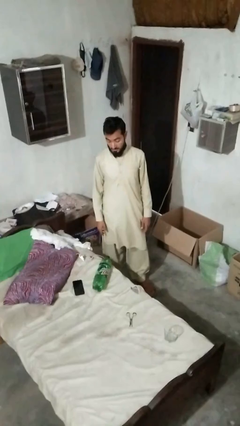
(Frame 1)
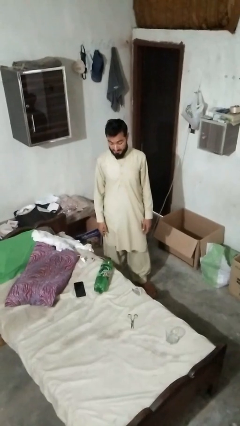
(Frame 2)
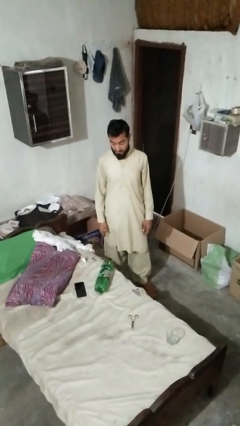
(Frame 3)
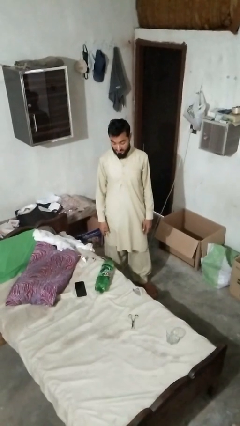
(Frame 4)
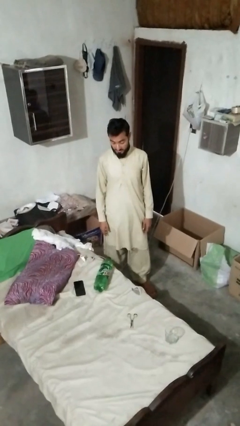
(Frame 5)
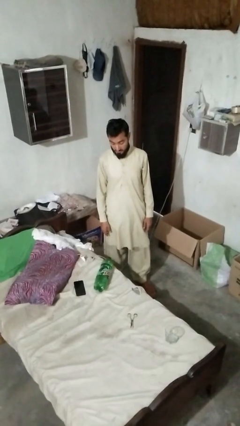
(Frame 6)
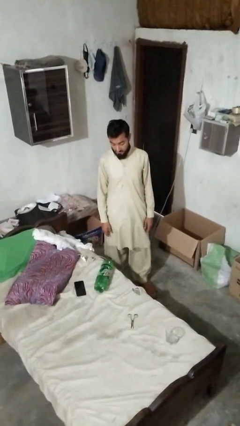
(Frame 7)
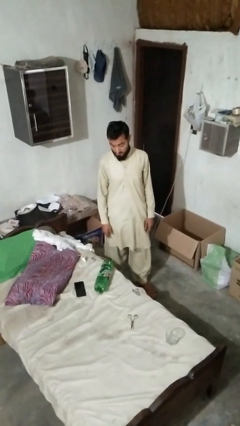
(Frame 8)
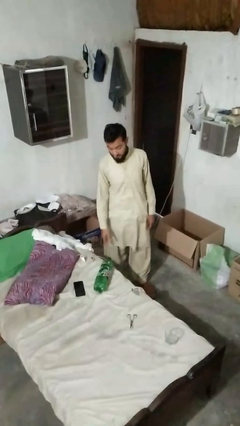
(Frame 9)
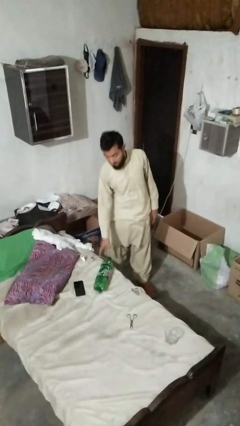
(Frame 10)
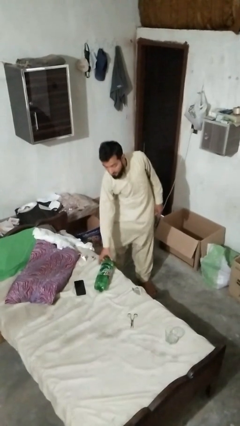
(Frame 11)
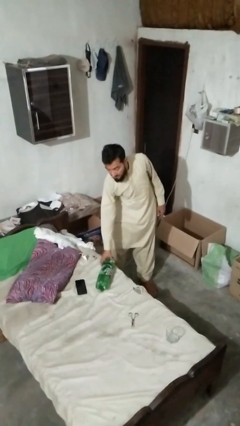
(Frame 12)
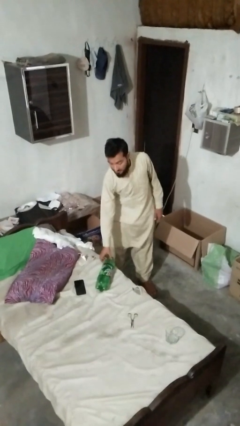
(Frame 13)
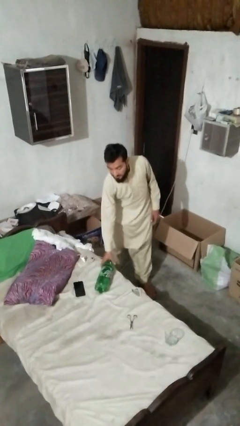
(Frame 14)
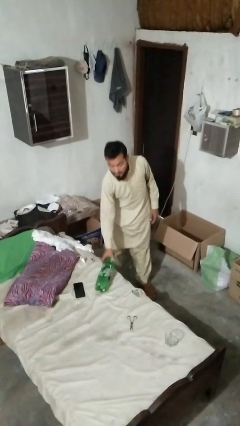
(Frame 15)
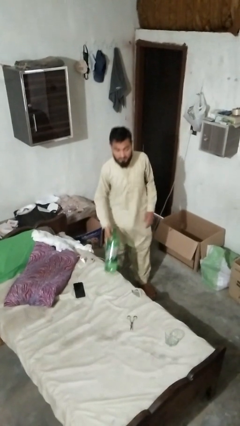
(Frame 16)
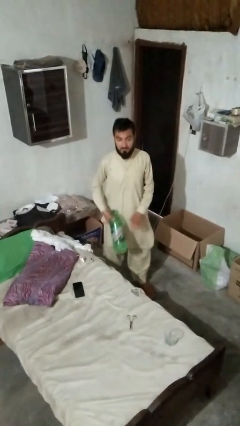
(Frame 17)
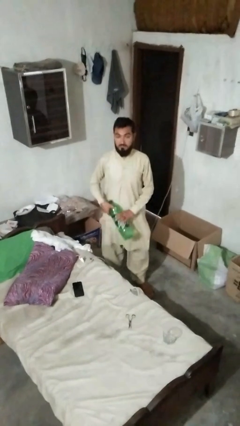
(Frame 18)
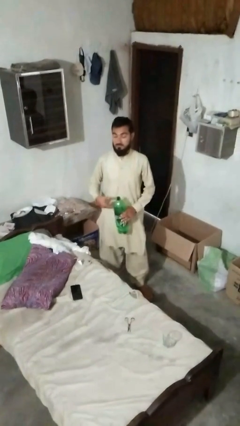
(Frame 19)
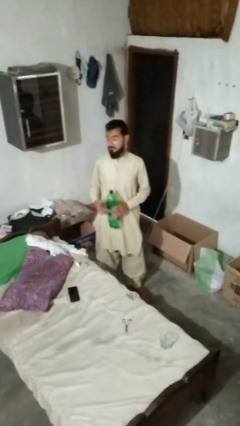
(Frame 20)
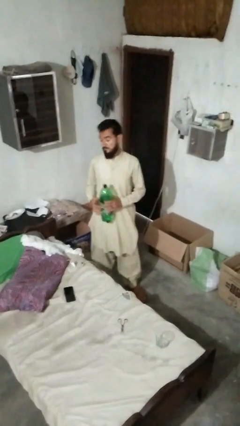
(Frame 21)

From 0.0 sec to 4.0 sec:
person picks up object from bed

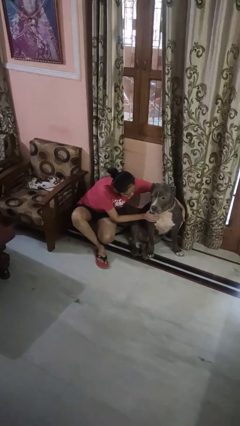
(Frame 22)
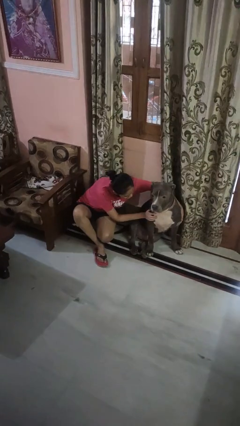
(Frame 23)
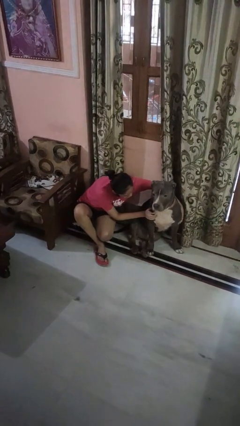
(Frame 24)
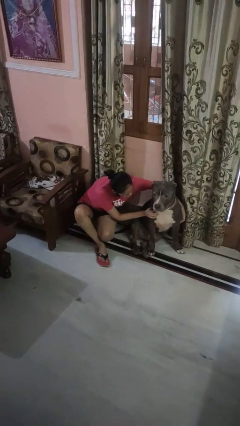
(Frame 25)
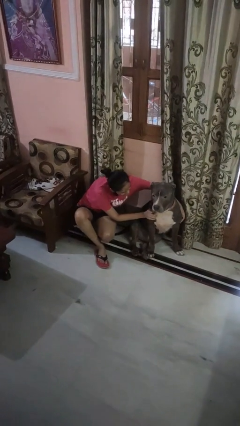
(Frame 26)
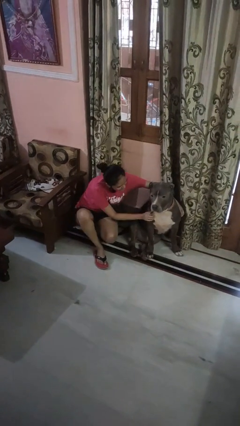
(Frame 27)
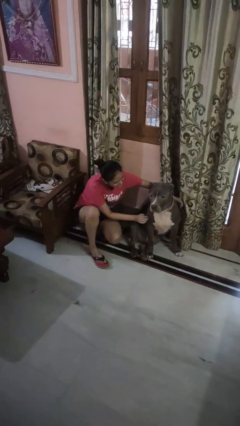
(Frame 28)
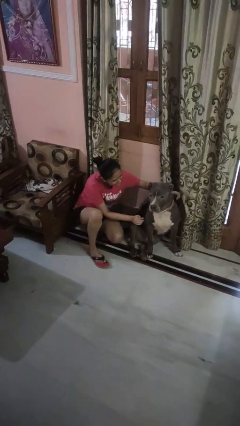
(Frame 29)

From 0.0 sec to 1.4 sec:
person hugs dog

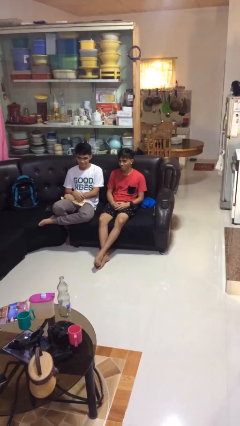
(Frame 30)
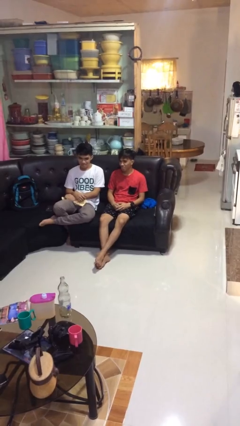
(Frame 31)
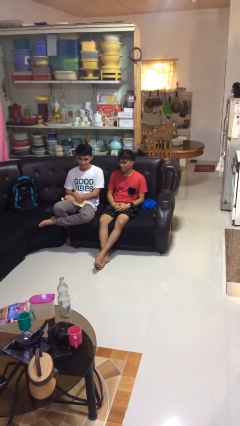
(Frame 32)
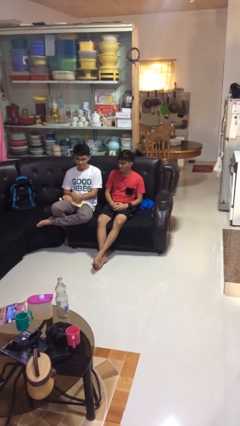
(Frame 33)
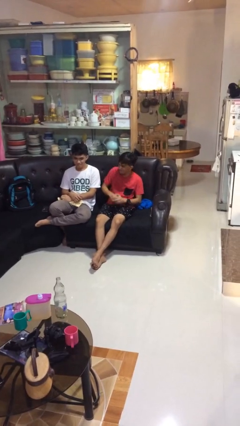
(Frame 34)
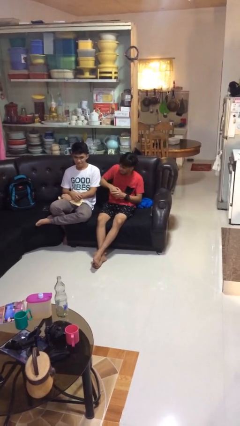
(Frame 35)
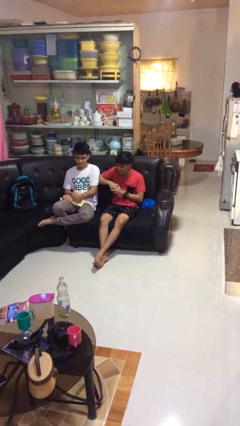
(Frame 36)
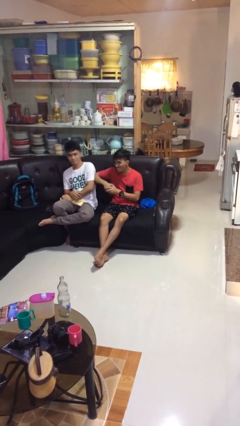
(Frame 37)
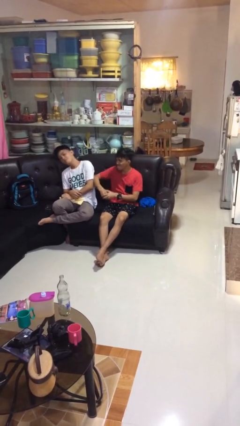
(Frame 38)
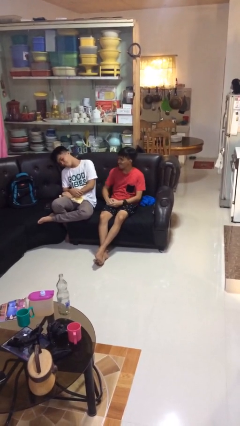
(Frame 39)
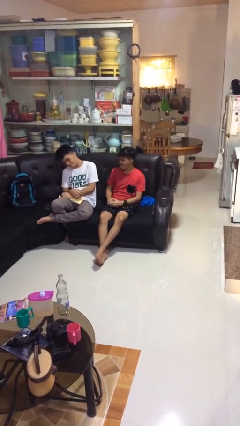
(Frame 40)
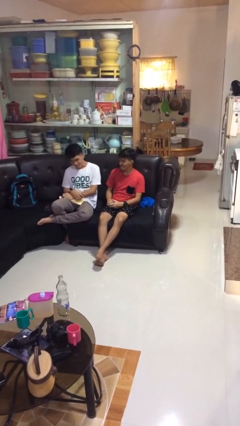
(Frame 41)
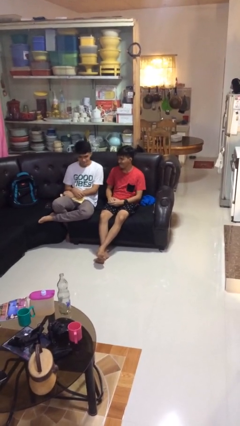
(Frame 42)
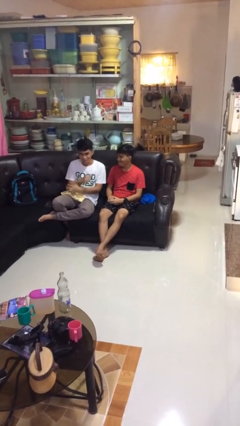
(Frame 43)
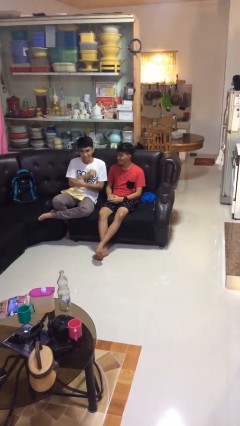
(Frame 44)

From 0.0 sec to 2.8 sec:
person nudges person with elbow

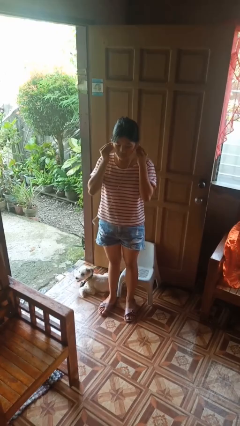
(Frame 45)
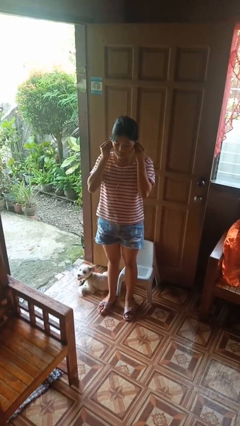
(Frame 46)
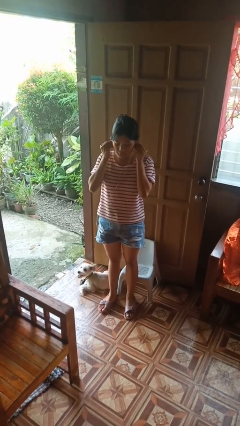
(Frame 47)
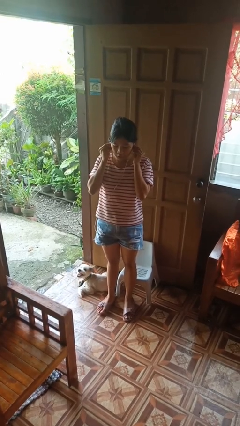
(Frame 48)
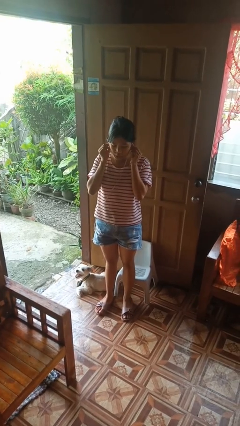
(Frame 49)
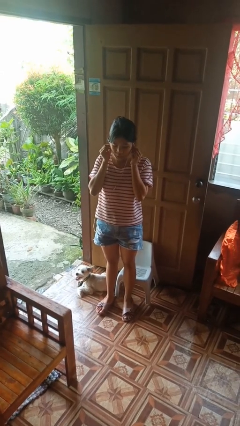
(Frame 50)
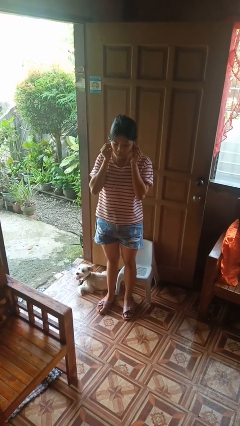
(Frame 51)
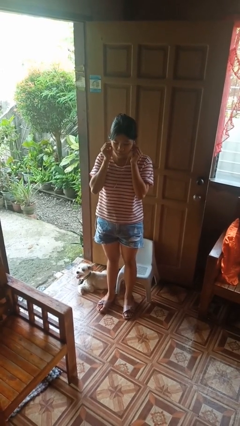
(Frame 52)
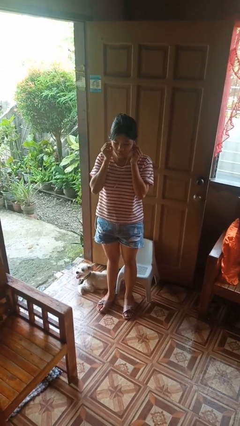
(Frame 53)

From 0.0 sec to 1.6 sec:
person puts on headphones

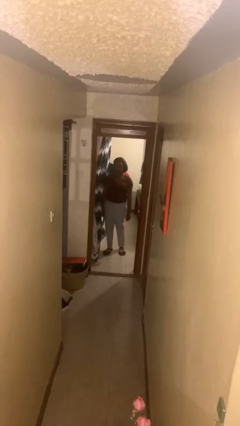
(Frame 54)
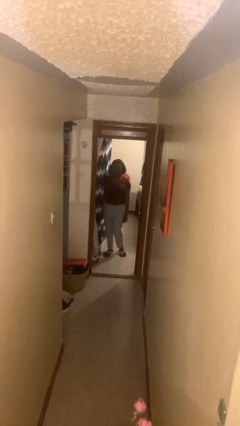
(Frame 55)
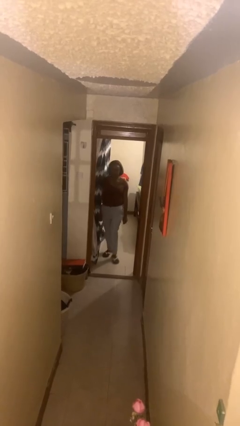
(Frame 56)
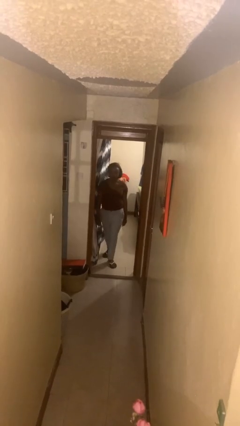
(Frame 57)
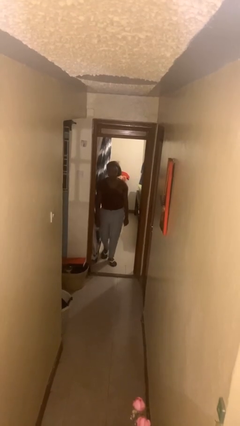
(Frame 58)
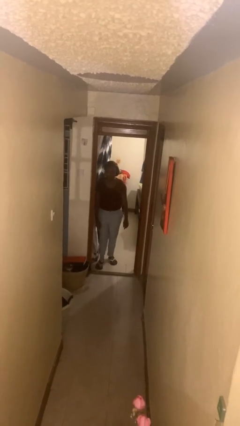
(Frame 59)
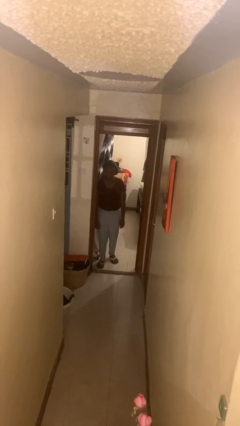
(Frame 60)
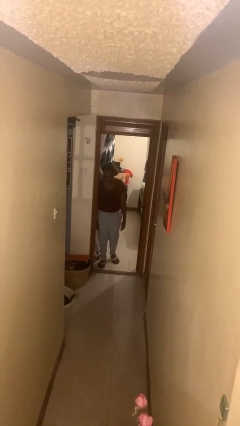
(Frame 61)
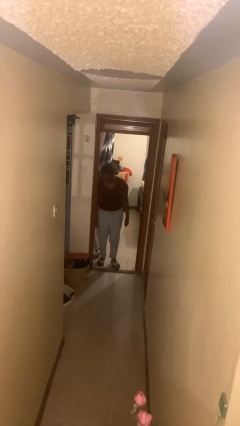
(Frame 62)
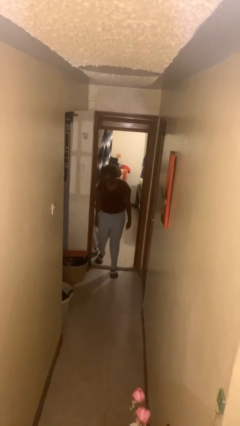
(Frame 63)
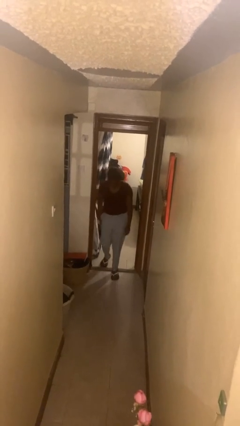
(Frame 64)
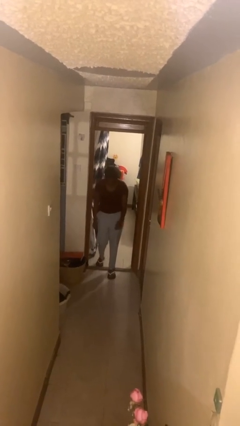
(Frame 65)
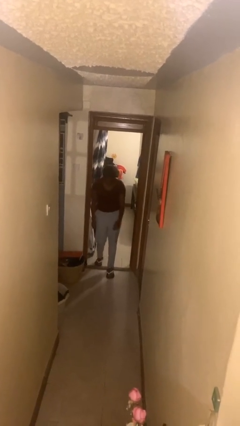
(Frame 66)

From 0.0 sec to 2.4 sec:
person bumps into wall

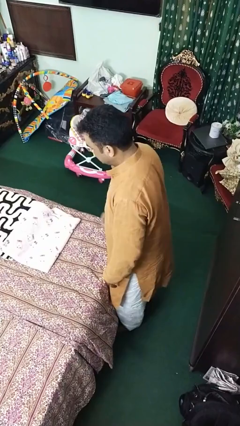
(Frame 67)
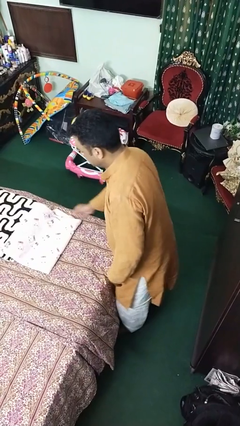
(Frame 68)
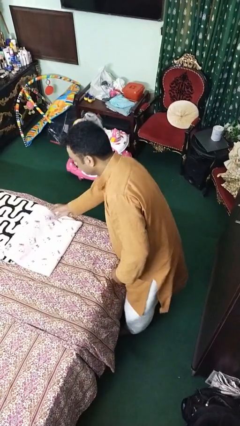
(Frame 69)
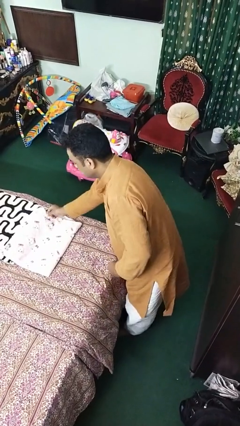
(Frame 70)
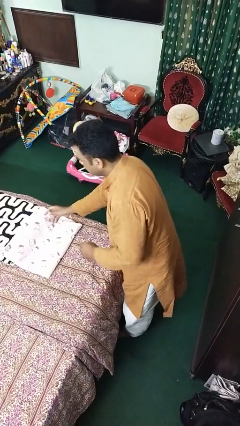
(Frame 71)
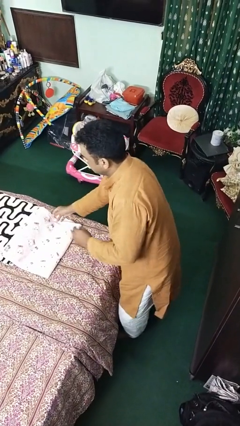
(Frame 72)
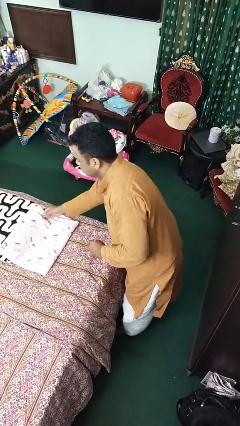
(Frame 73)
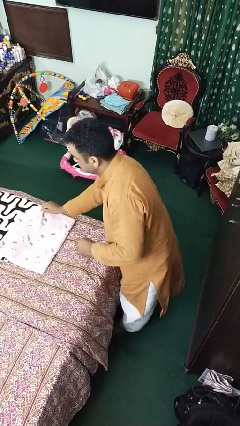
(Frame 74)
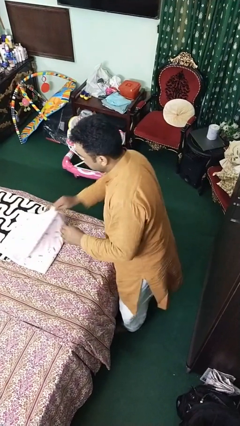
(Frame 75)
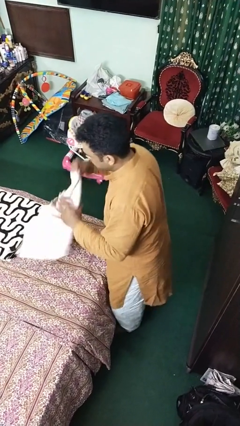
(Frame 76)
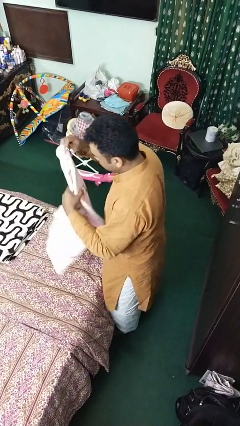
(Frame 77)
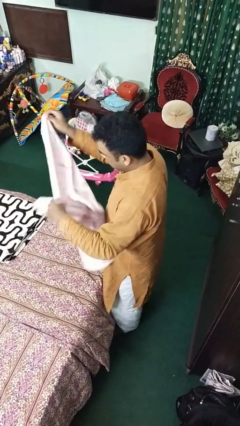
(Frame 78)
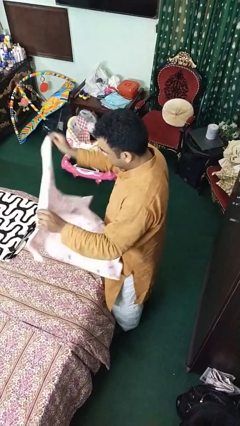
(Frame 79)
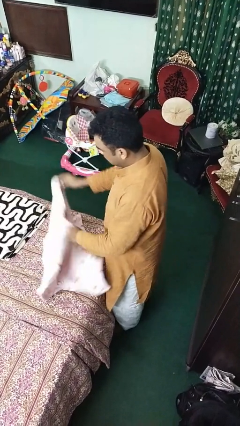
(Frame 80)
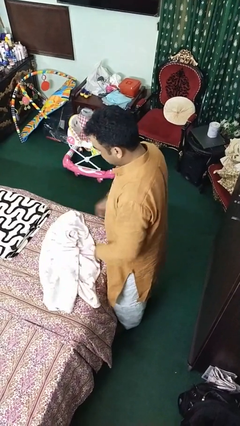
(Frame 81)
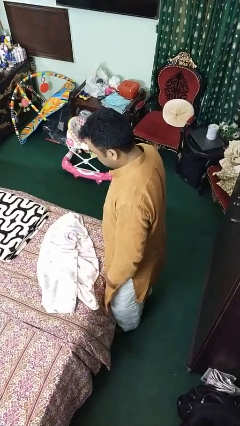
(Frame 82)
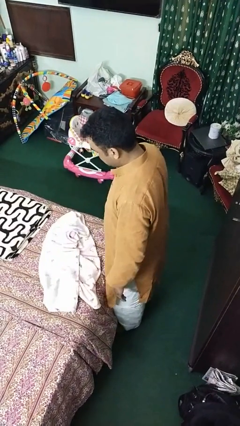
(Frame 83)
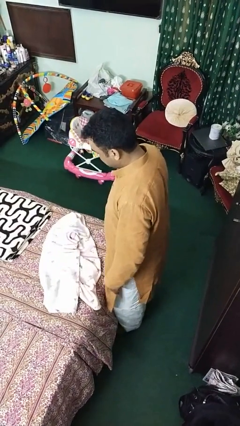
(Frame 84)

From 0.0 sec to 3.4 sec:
person unfolds blanket

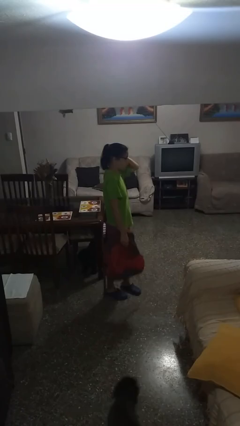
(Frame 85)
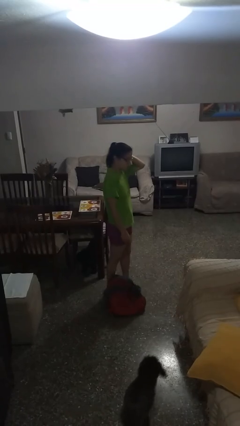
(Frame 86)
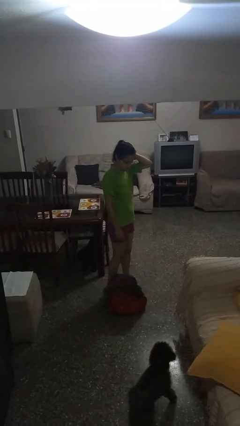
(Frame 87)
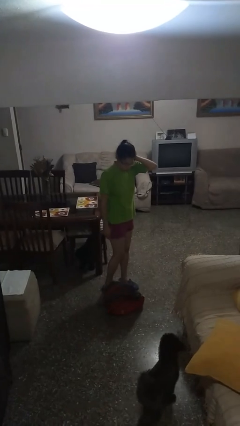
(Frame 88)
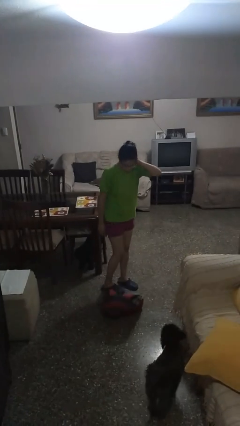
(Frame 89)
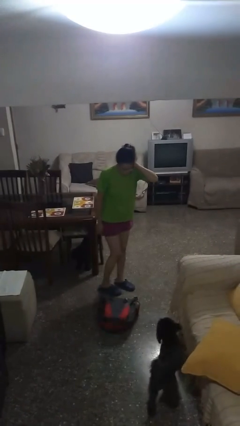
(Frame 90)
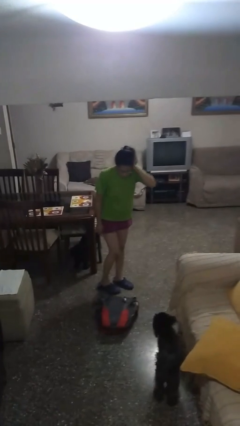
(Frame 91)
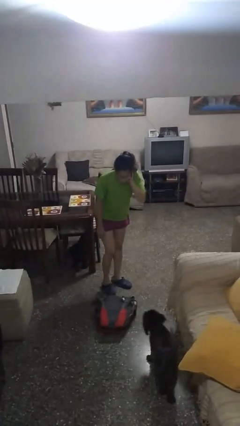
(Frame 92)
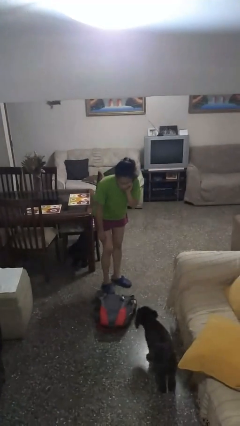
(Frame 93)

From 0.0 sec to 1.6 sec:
person drops object

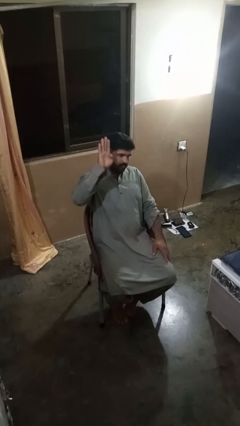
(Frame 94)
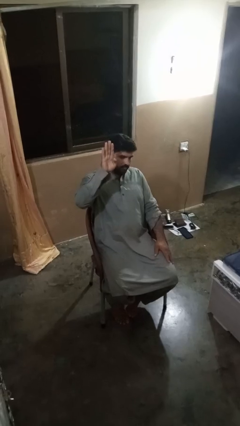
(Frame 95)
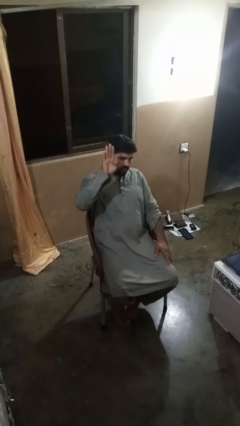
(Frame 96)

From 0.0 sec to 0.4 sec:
person gestures number four
